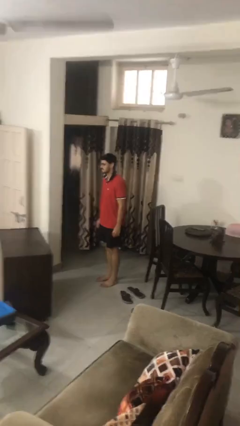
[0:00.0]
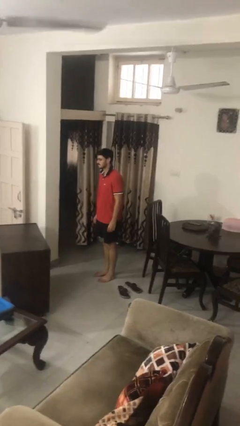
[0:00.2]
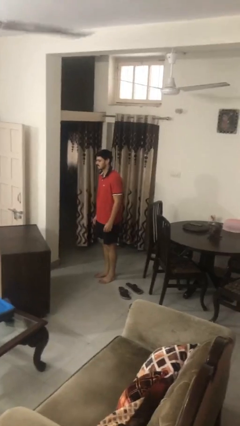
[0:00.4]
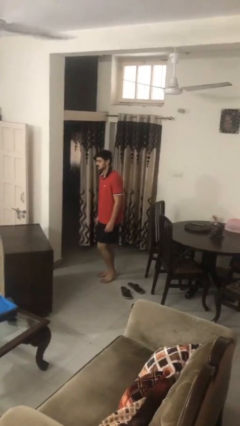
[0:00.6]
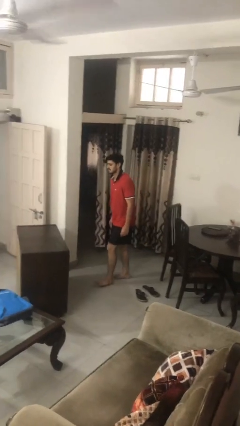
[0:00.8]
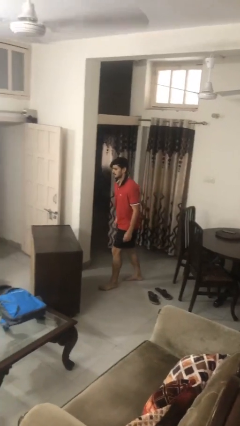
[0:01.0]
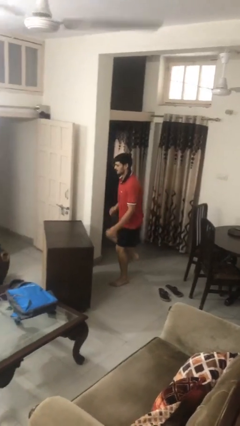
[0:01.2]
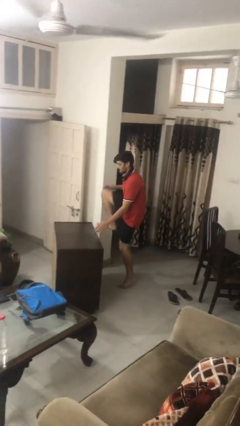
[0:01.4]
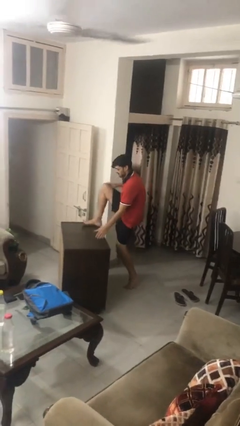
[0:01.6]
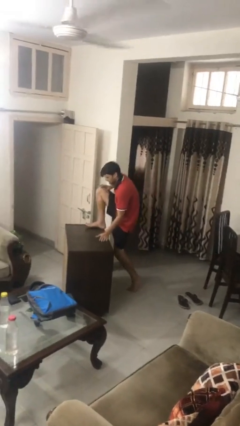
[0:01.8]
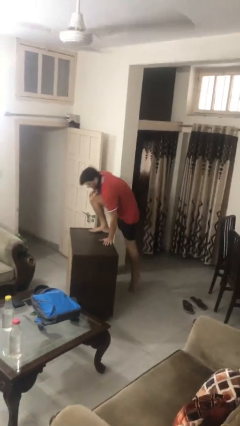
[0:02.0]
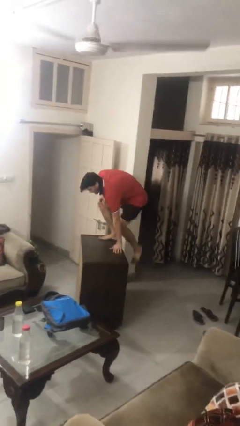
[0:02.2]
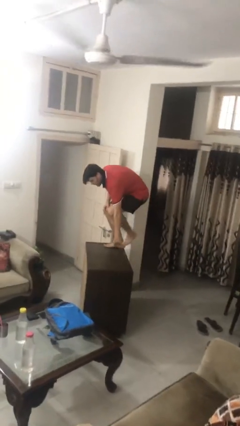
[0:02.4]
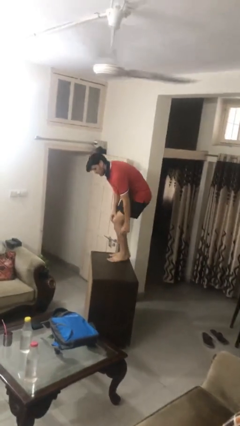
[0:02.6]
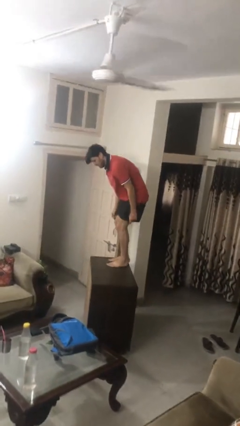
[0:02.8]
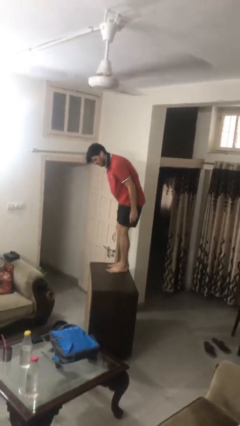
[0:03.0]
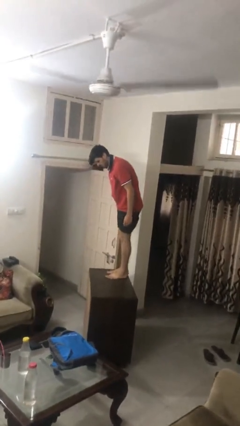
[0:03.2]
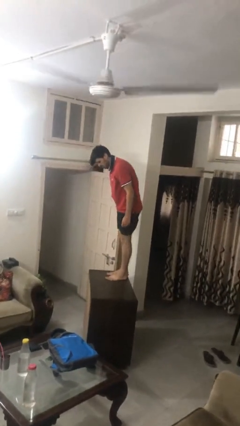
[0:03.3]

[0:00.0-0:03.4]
person climbs on table

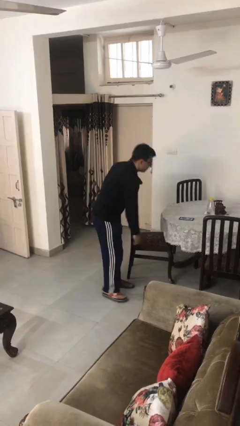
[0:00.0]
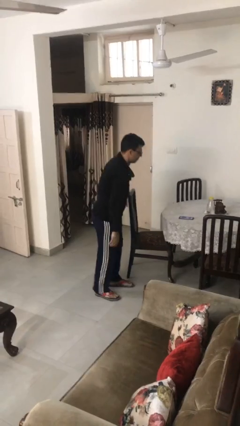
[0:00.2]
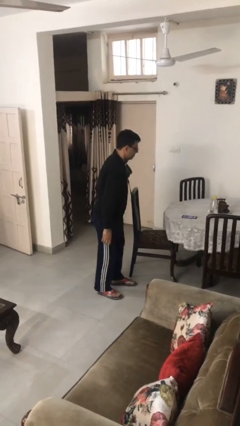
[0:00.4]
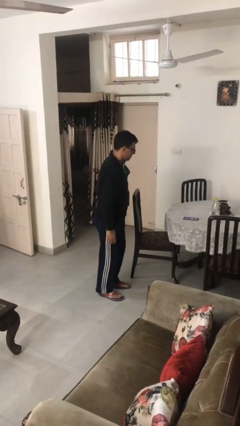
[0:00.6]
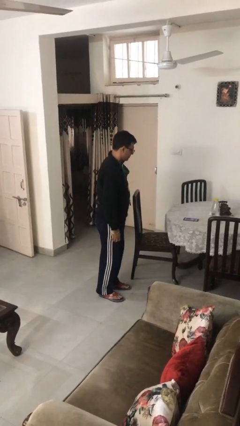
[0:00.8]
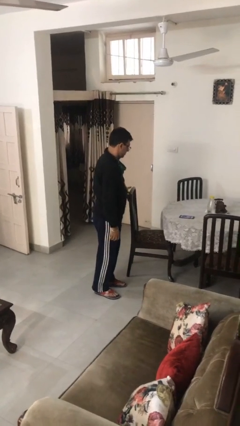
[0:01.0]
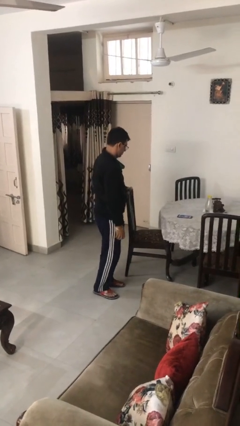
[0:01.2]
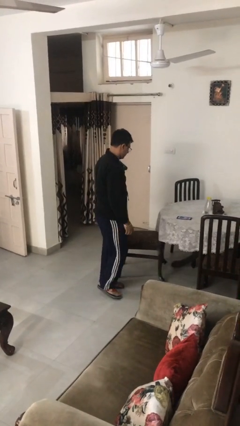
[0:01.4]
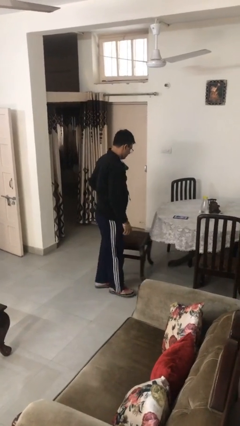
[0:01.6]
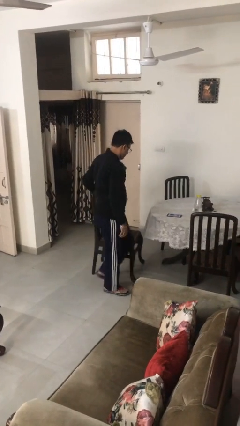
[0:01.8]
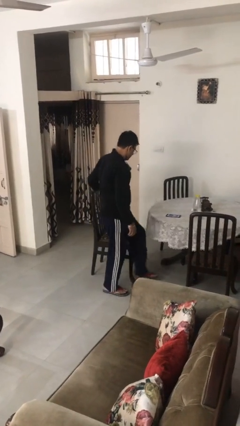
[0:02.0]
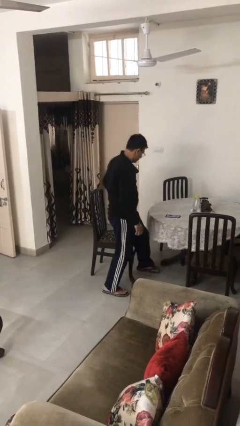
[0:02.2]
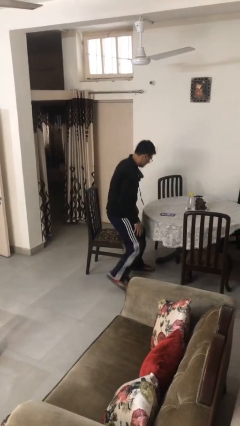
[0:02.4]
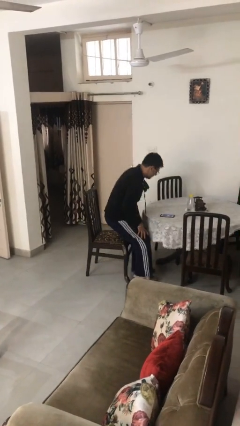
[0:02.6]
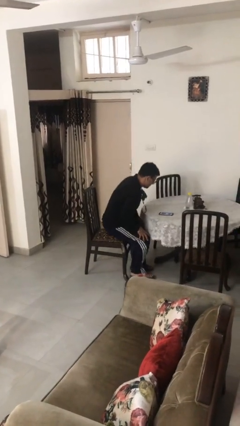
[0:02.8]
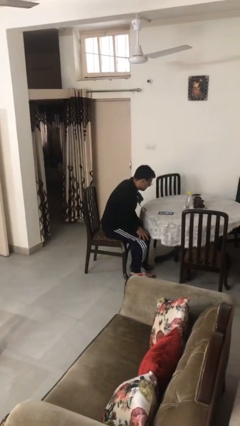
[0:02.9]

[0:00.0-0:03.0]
person sits down

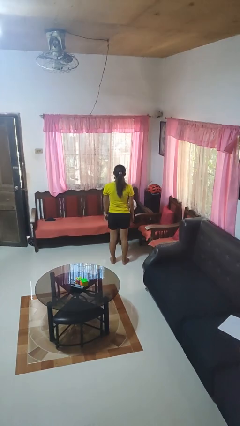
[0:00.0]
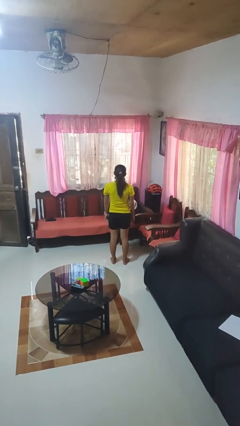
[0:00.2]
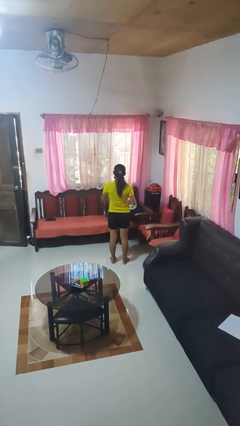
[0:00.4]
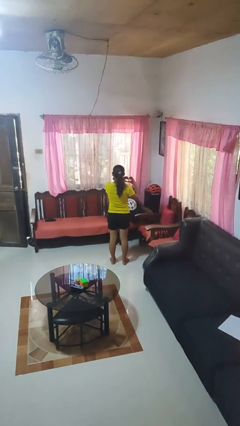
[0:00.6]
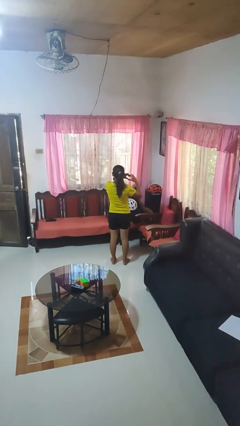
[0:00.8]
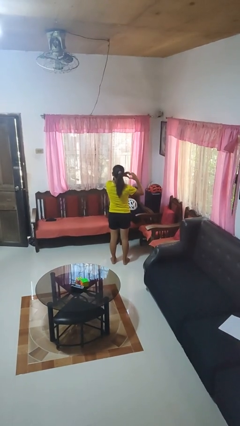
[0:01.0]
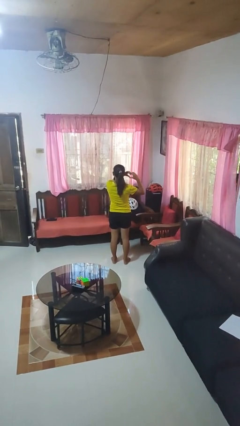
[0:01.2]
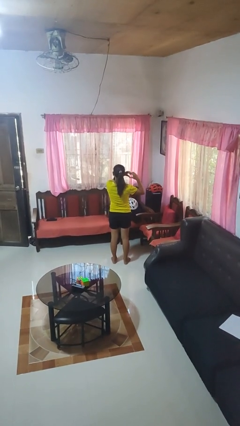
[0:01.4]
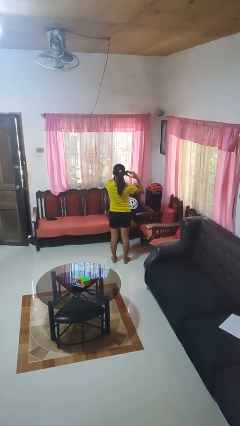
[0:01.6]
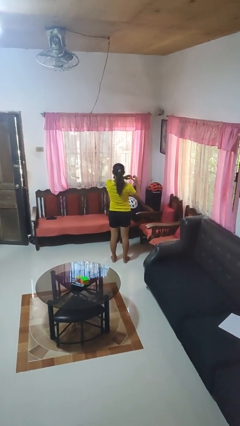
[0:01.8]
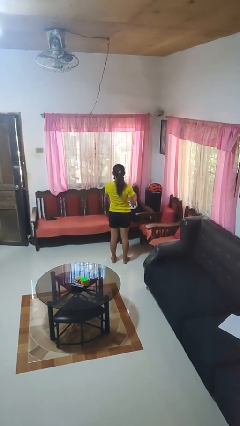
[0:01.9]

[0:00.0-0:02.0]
person gestures heart

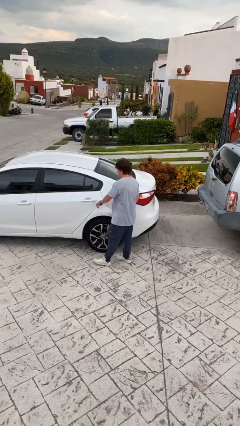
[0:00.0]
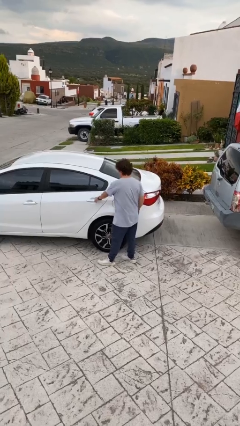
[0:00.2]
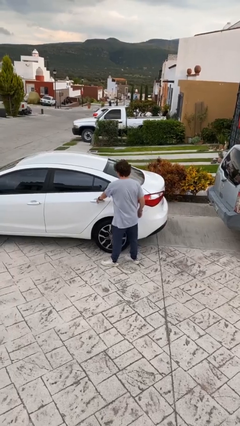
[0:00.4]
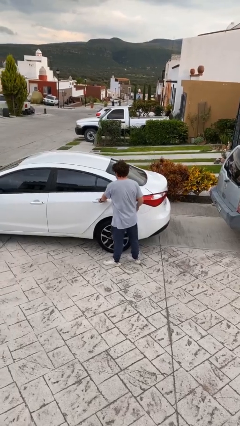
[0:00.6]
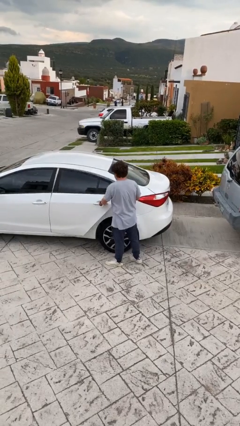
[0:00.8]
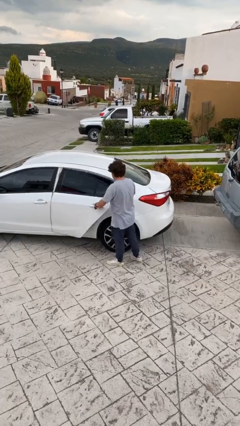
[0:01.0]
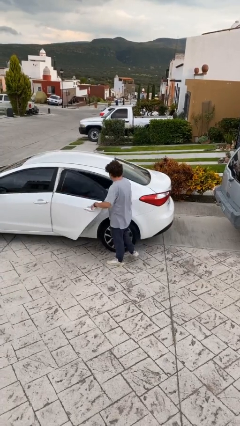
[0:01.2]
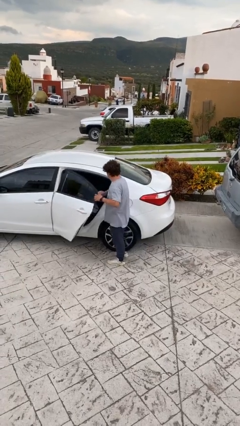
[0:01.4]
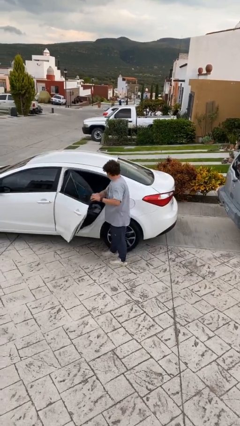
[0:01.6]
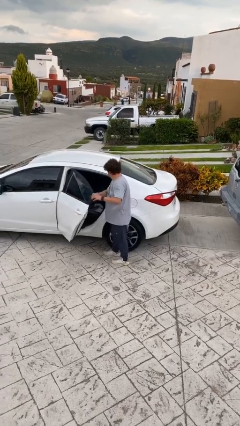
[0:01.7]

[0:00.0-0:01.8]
person opens car door

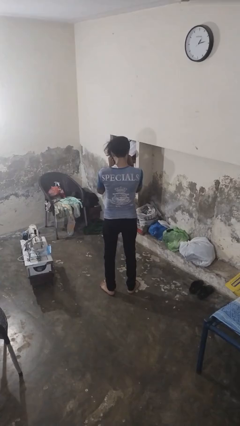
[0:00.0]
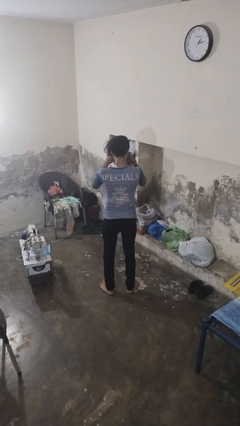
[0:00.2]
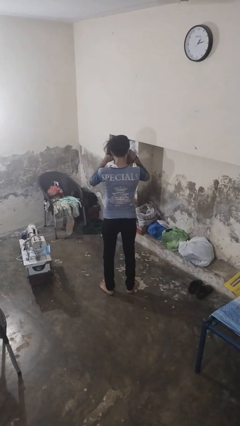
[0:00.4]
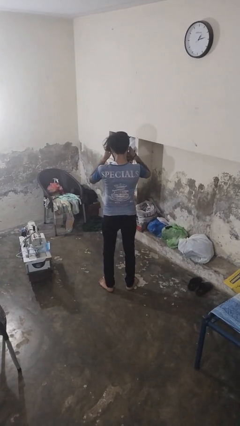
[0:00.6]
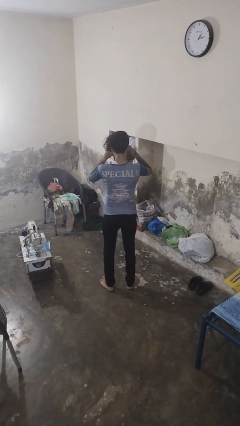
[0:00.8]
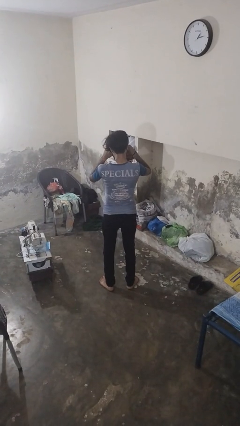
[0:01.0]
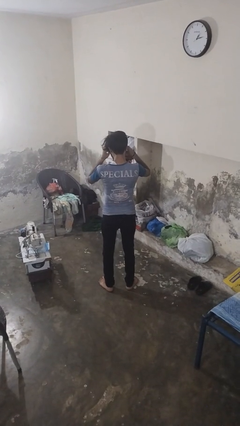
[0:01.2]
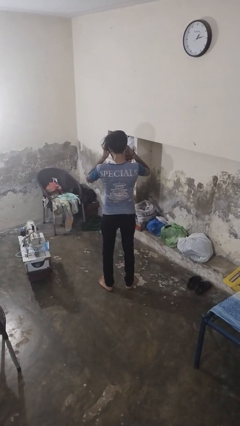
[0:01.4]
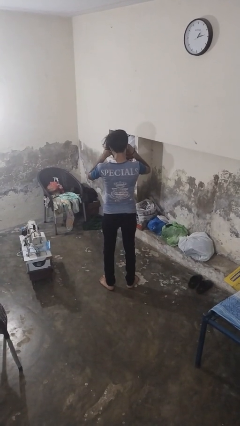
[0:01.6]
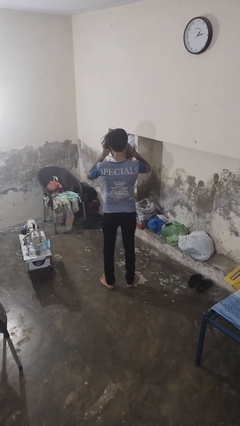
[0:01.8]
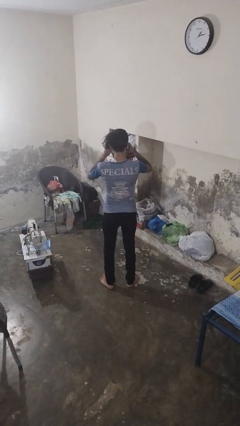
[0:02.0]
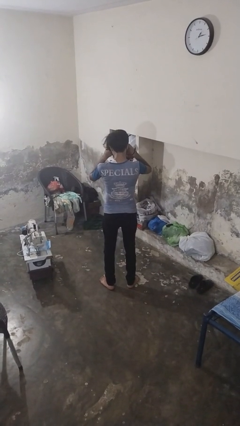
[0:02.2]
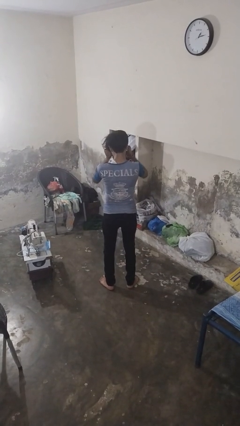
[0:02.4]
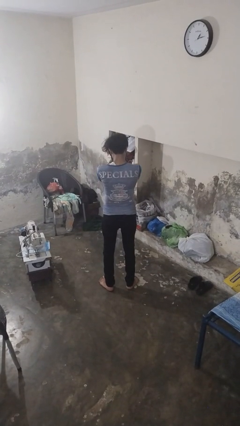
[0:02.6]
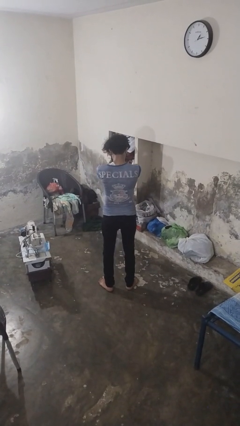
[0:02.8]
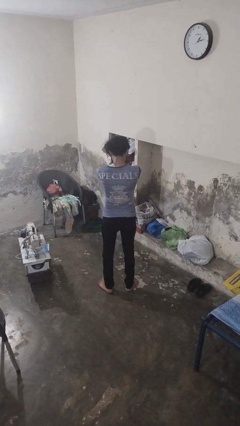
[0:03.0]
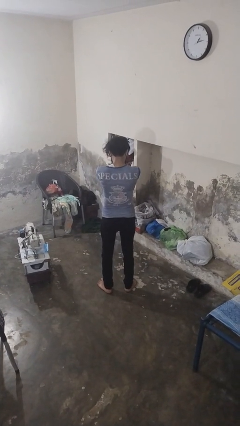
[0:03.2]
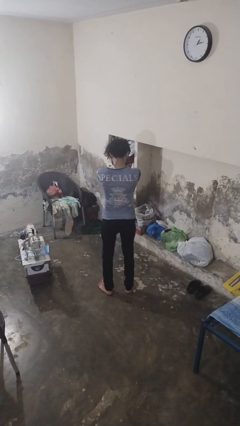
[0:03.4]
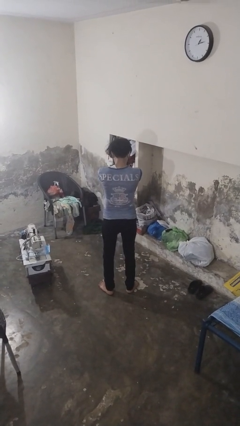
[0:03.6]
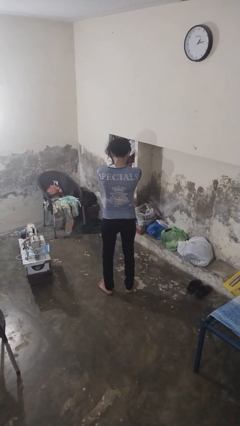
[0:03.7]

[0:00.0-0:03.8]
person rubs eyes

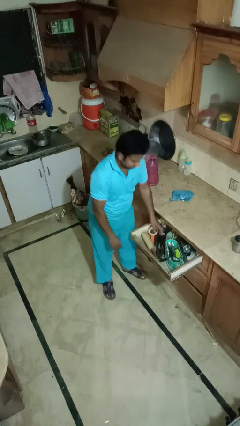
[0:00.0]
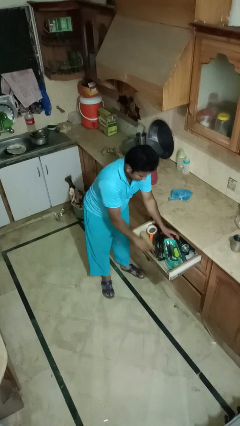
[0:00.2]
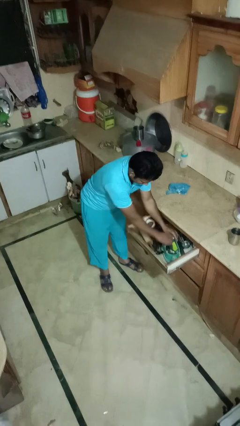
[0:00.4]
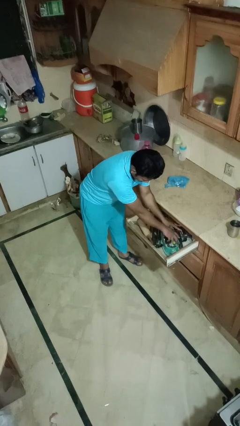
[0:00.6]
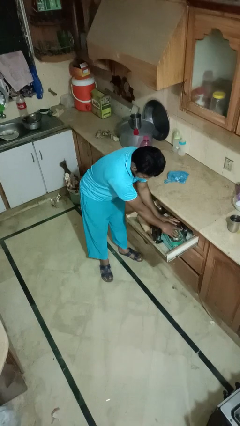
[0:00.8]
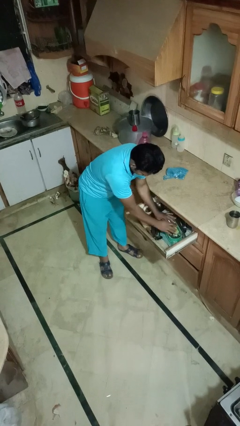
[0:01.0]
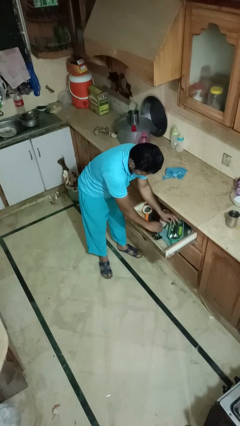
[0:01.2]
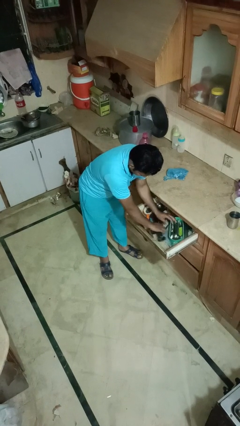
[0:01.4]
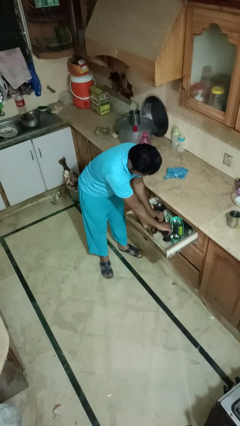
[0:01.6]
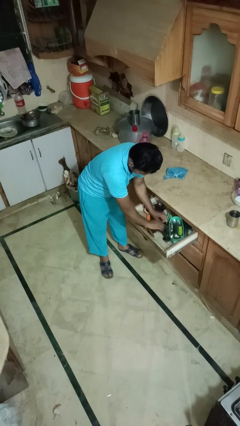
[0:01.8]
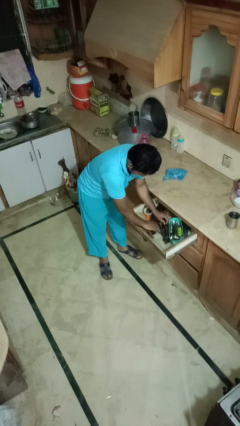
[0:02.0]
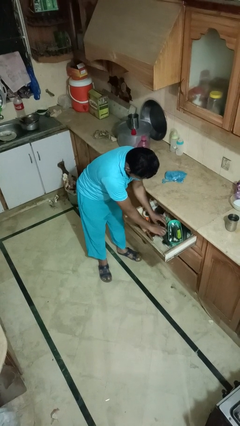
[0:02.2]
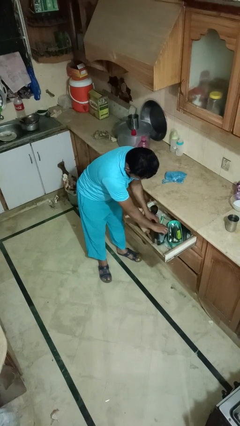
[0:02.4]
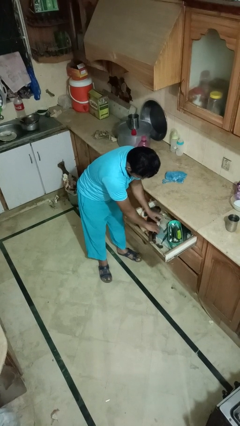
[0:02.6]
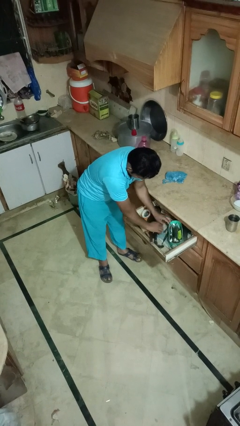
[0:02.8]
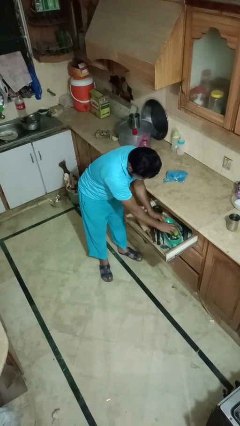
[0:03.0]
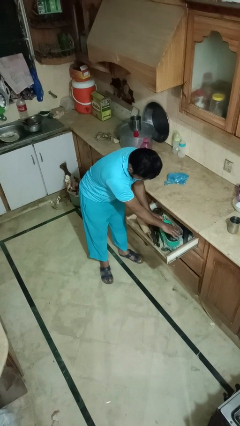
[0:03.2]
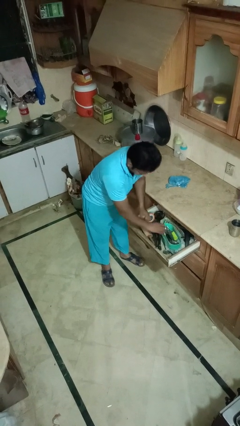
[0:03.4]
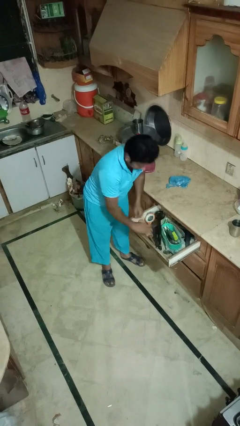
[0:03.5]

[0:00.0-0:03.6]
person searches in kitchen drawer
